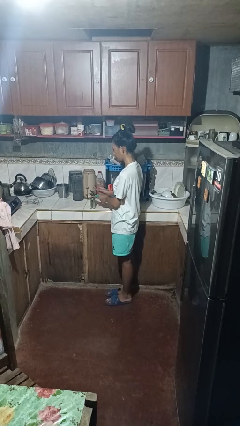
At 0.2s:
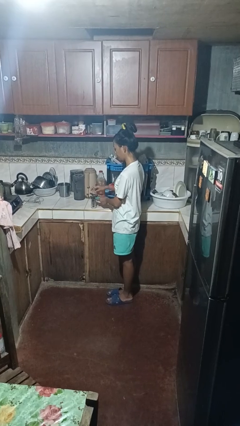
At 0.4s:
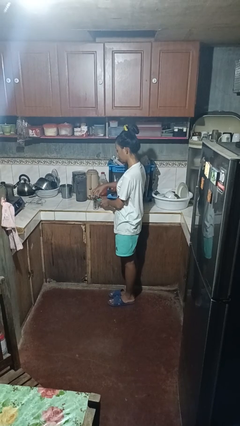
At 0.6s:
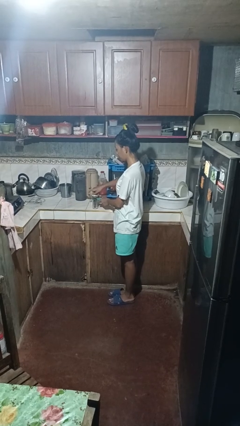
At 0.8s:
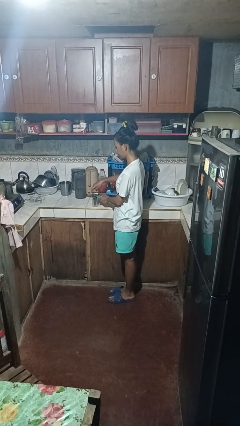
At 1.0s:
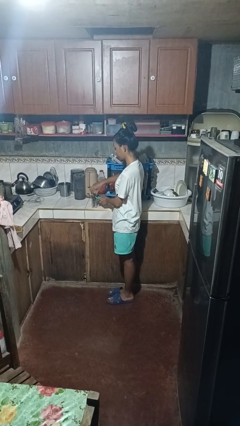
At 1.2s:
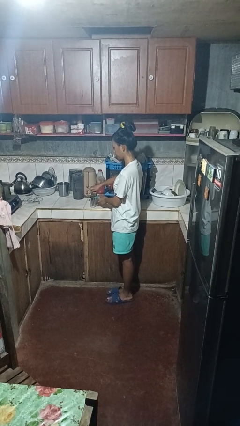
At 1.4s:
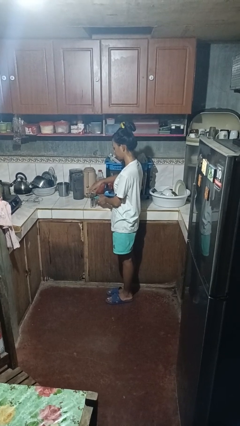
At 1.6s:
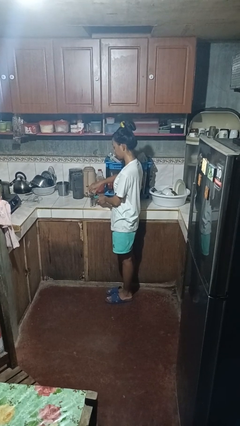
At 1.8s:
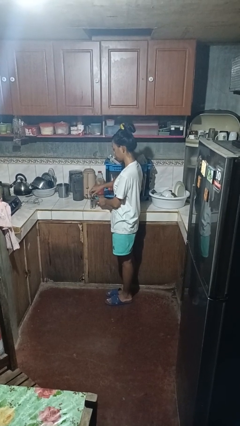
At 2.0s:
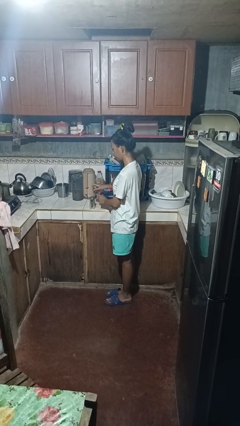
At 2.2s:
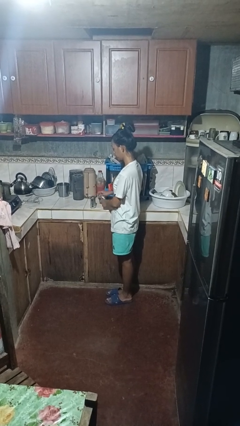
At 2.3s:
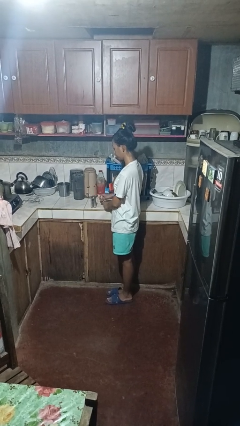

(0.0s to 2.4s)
person opens can with can opener

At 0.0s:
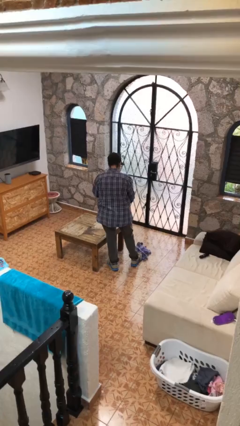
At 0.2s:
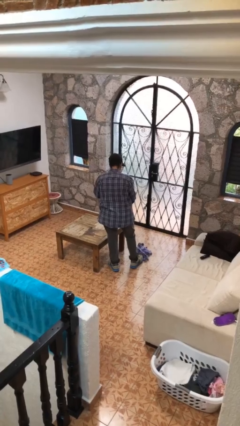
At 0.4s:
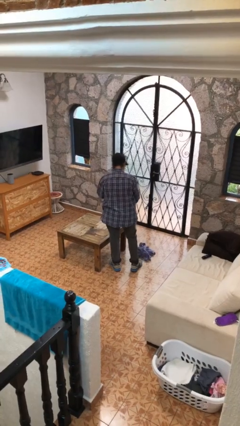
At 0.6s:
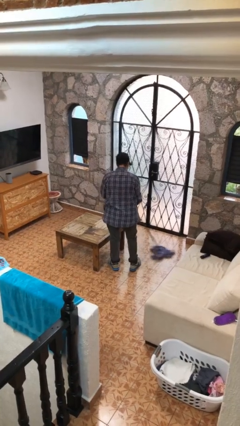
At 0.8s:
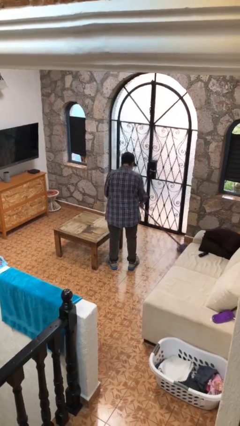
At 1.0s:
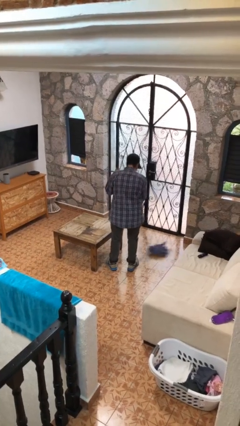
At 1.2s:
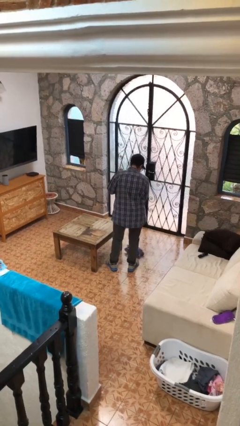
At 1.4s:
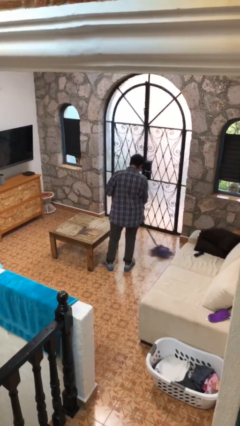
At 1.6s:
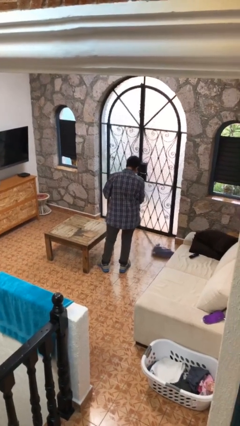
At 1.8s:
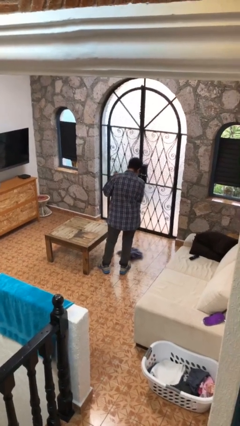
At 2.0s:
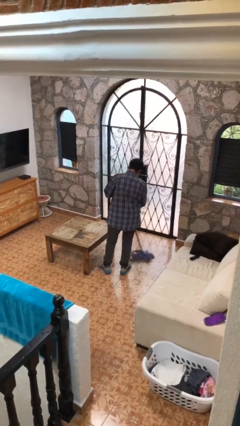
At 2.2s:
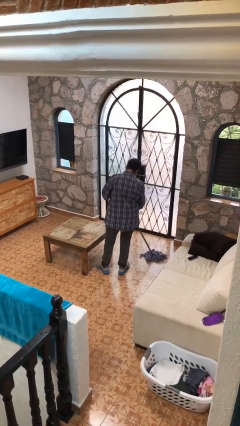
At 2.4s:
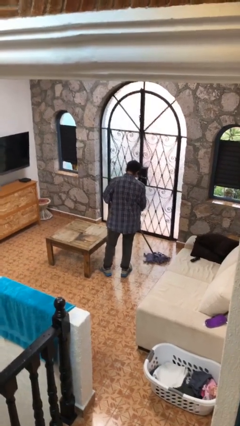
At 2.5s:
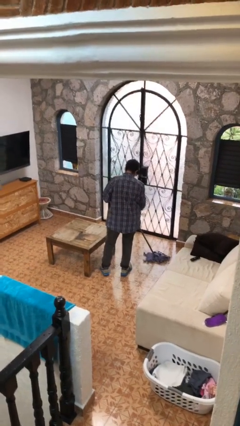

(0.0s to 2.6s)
person mops

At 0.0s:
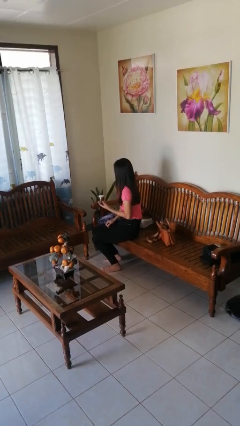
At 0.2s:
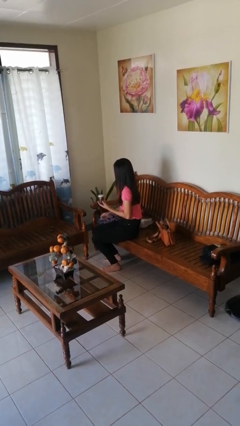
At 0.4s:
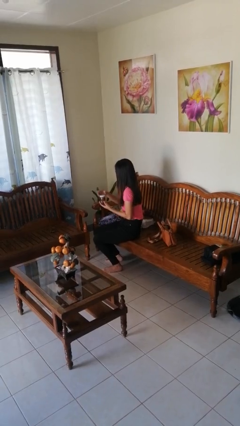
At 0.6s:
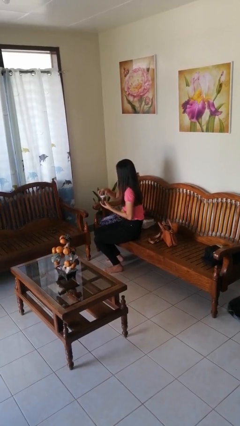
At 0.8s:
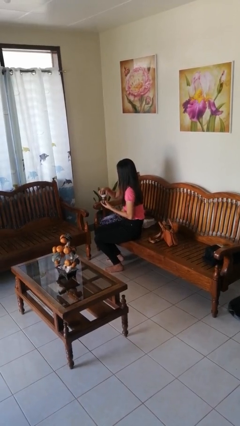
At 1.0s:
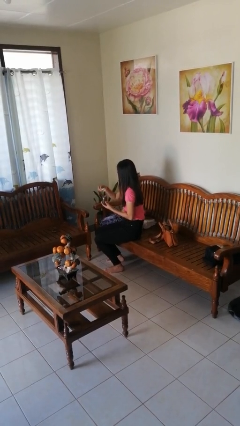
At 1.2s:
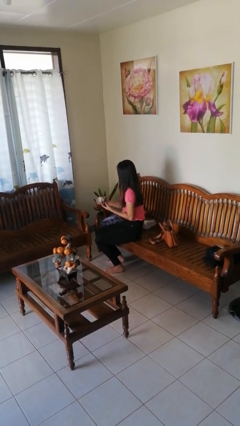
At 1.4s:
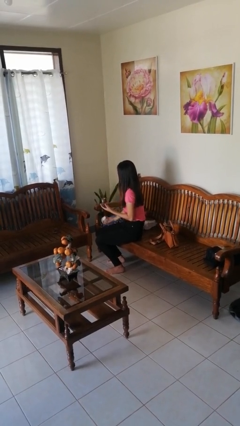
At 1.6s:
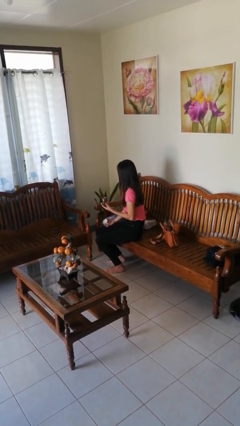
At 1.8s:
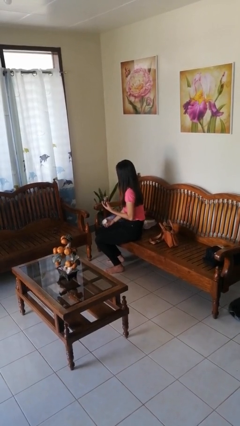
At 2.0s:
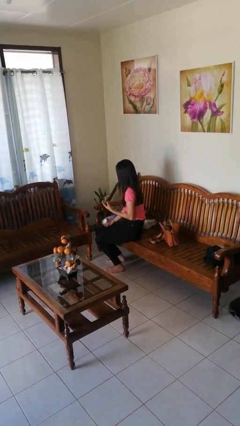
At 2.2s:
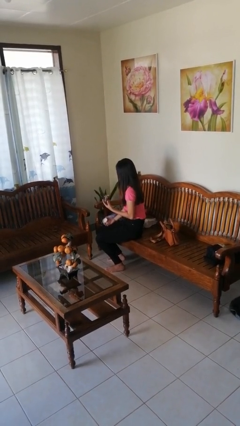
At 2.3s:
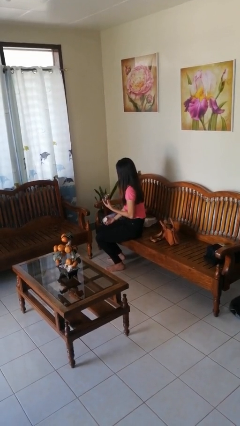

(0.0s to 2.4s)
person opens jar

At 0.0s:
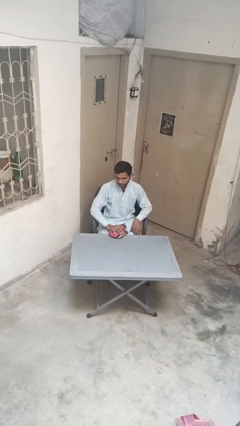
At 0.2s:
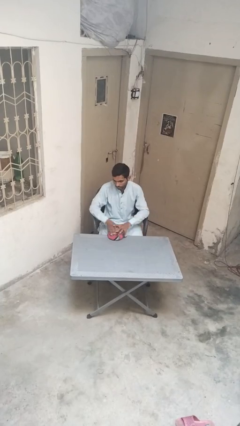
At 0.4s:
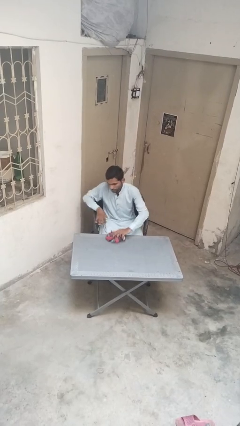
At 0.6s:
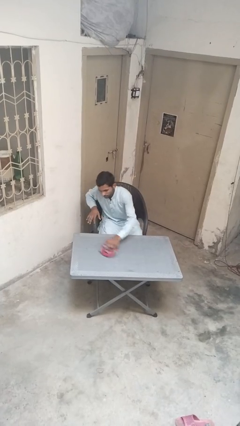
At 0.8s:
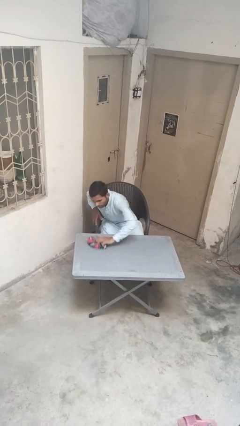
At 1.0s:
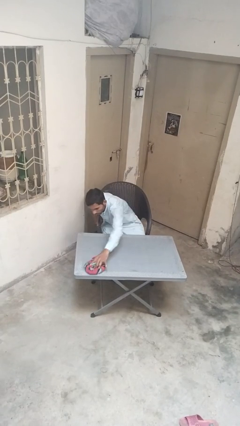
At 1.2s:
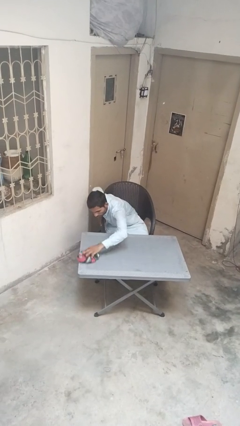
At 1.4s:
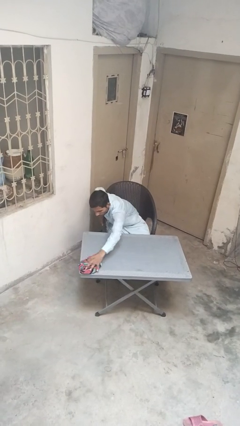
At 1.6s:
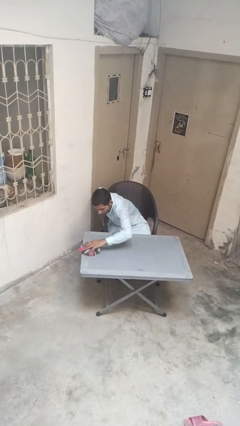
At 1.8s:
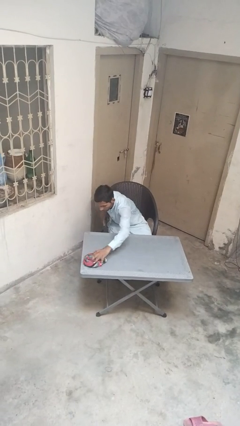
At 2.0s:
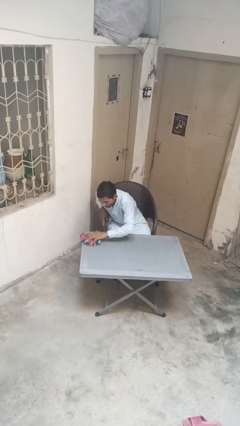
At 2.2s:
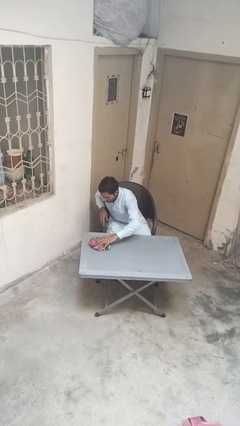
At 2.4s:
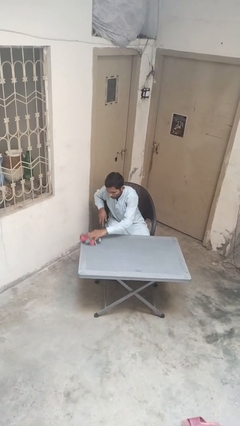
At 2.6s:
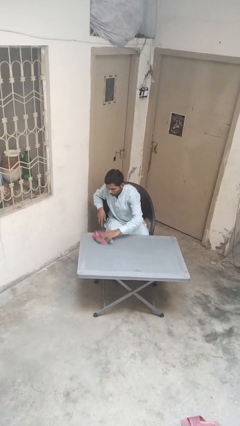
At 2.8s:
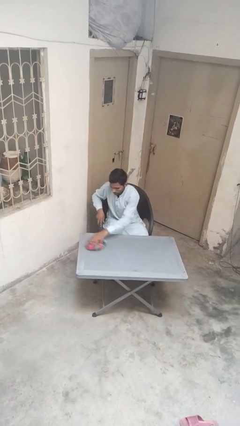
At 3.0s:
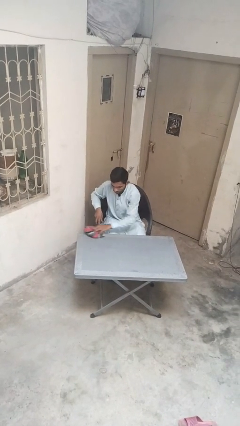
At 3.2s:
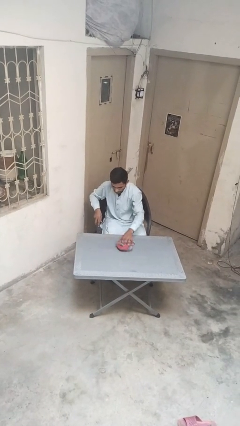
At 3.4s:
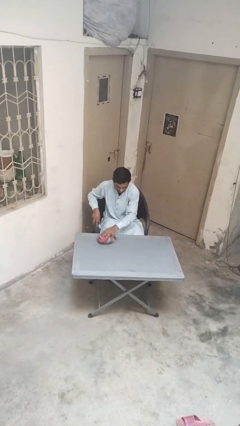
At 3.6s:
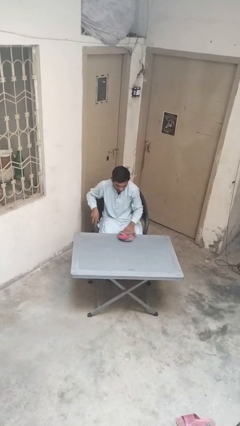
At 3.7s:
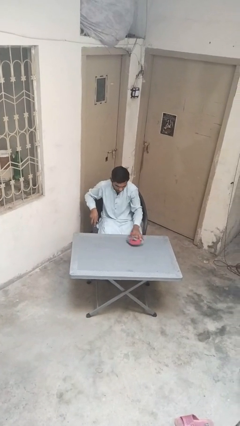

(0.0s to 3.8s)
person cleans table with rag

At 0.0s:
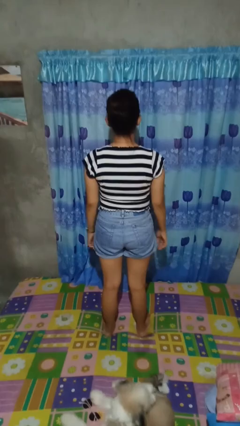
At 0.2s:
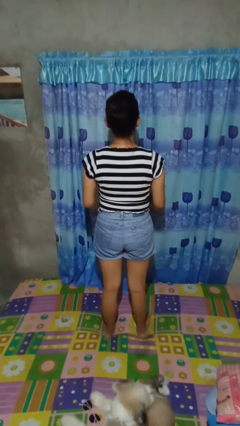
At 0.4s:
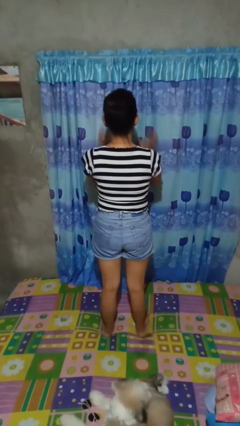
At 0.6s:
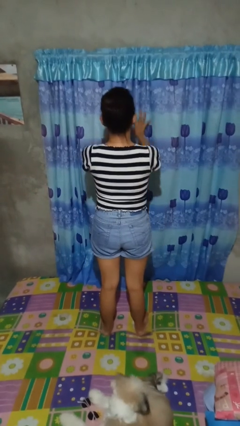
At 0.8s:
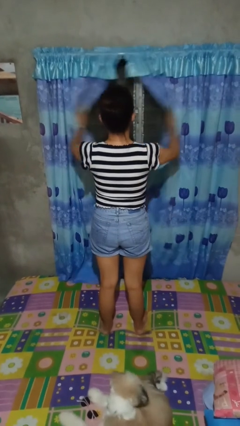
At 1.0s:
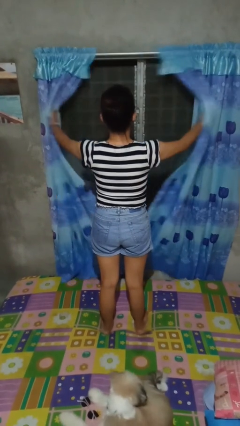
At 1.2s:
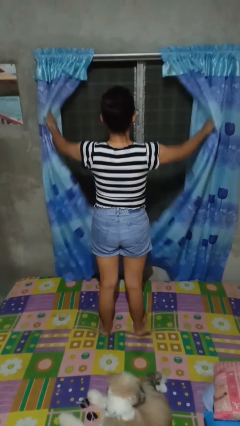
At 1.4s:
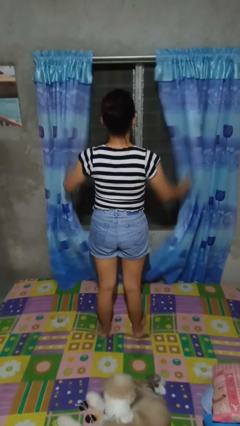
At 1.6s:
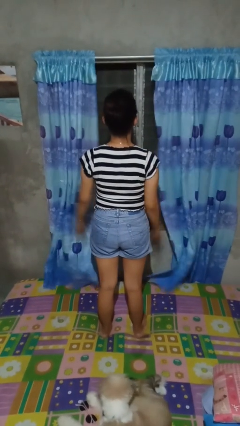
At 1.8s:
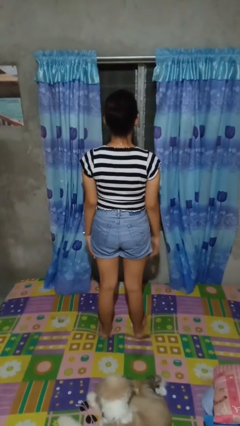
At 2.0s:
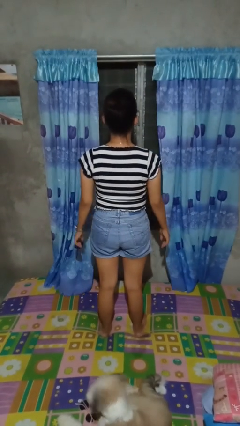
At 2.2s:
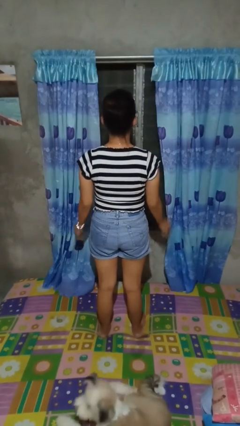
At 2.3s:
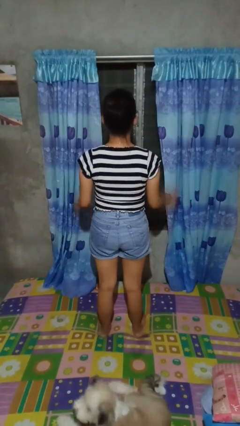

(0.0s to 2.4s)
person opens curtains

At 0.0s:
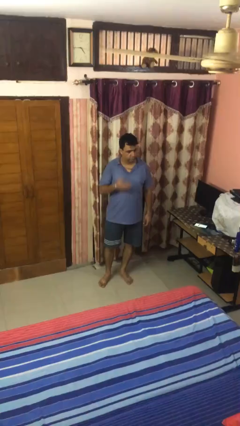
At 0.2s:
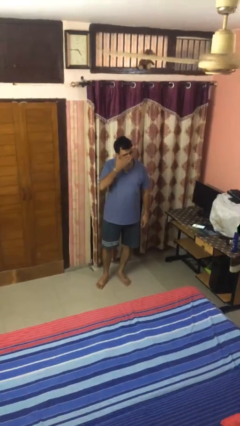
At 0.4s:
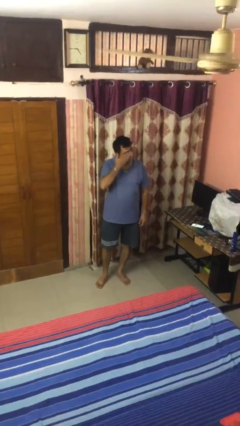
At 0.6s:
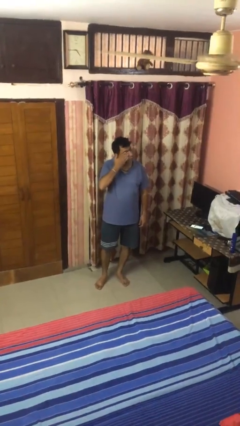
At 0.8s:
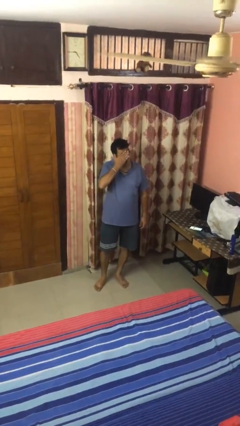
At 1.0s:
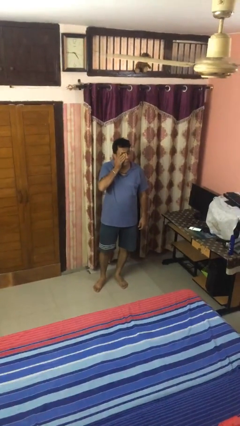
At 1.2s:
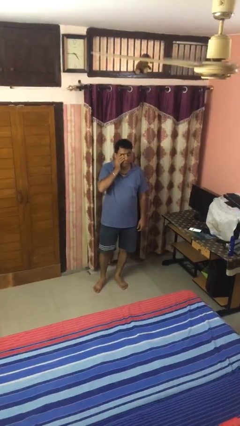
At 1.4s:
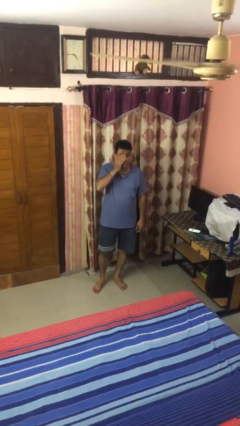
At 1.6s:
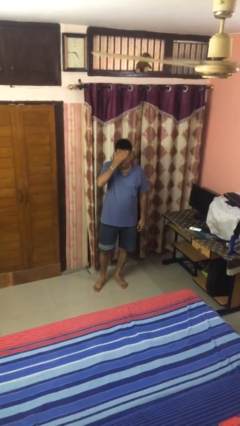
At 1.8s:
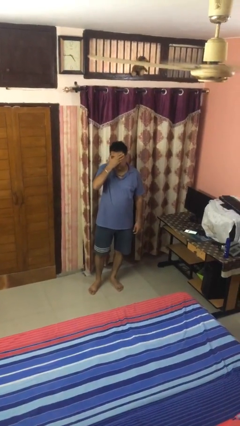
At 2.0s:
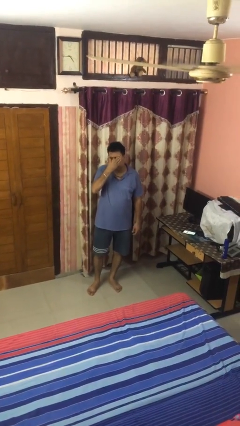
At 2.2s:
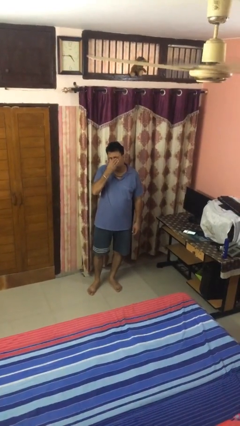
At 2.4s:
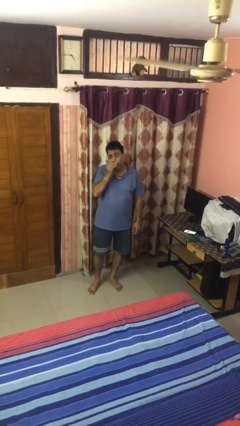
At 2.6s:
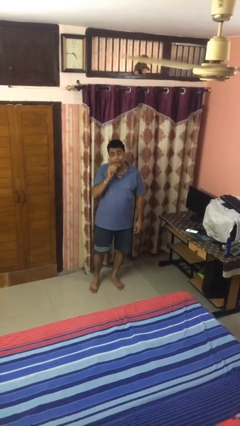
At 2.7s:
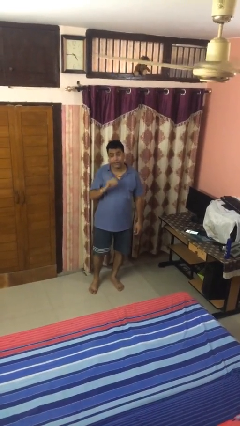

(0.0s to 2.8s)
person rubs eyes

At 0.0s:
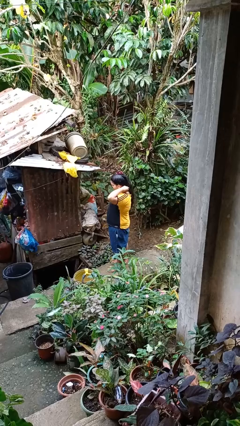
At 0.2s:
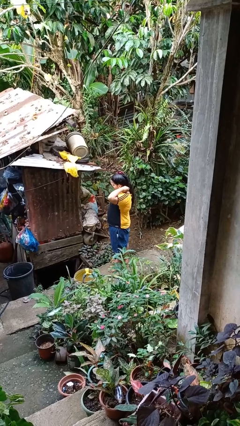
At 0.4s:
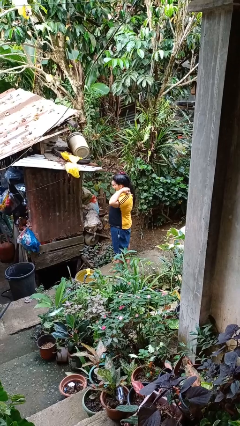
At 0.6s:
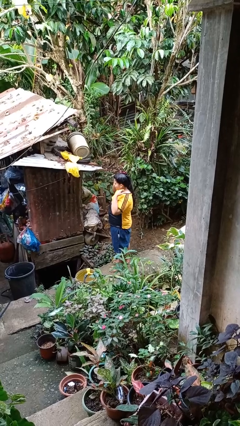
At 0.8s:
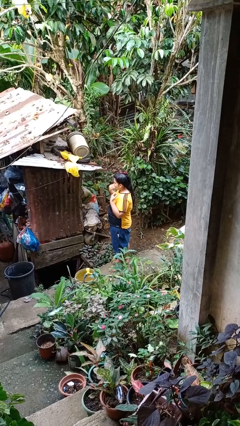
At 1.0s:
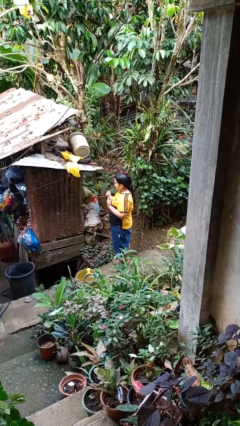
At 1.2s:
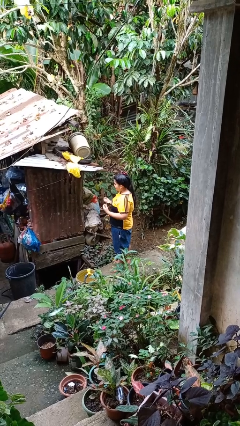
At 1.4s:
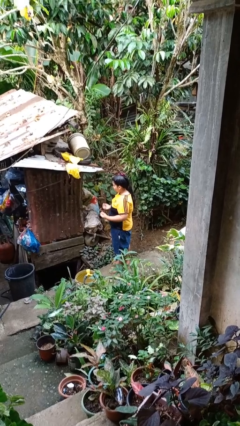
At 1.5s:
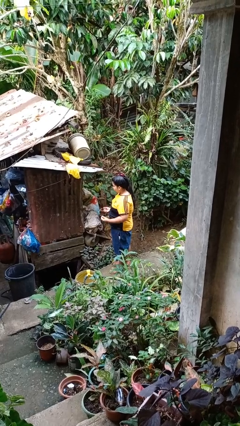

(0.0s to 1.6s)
person takes off necklace
